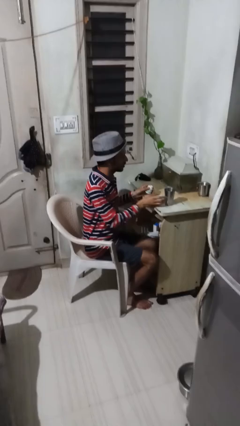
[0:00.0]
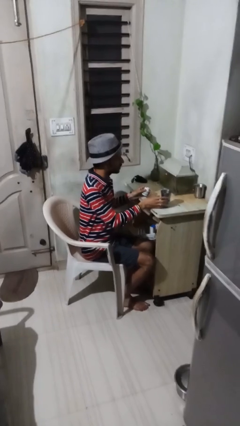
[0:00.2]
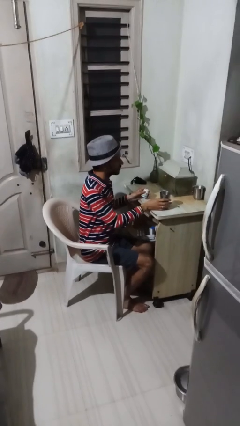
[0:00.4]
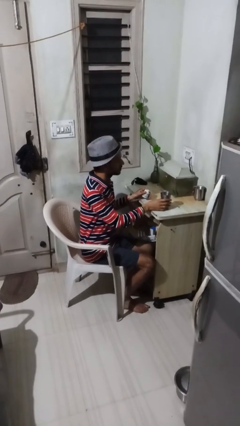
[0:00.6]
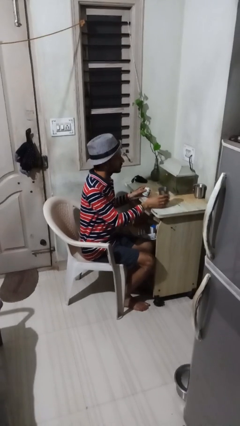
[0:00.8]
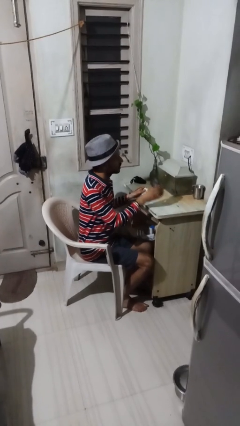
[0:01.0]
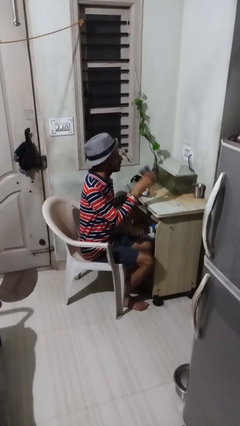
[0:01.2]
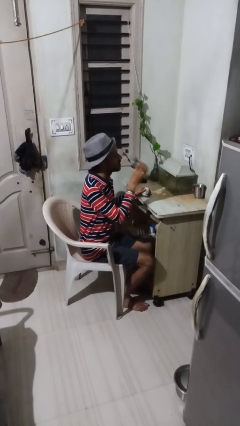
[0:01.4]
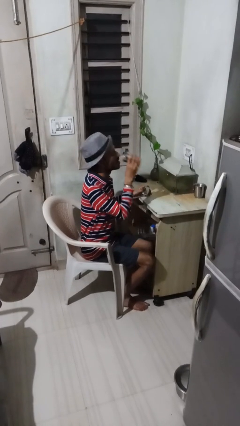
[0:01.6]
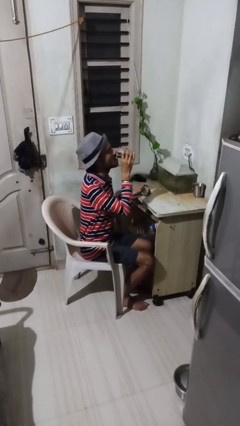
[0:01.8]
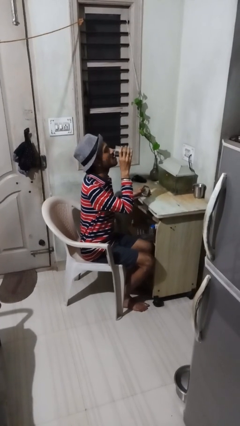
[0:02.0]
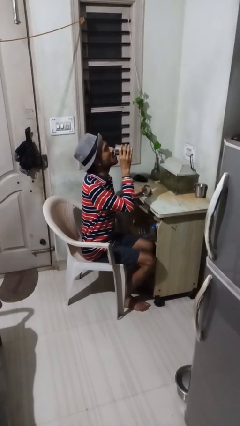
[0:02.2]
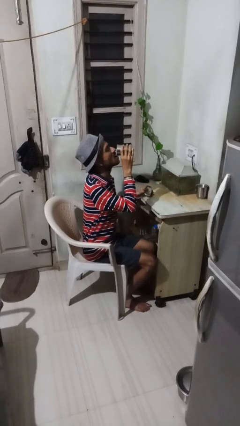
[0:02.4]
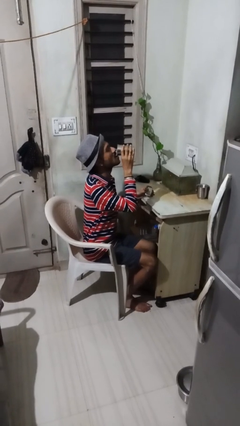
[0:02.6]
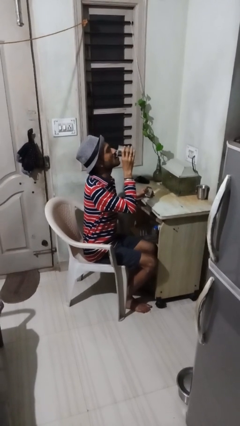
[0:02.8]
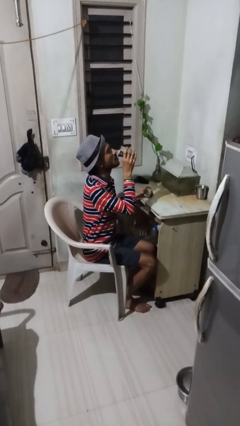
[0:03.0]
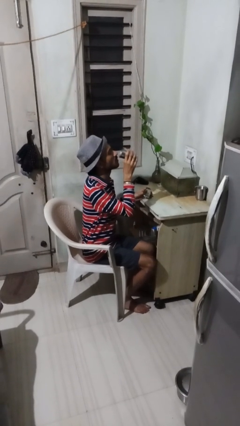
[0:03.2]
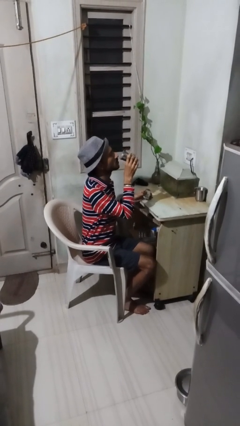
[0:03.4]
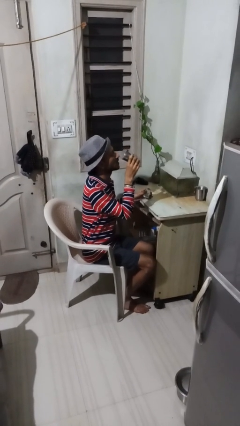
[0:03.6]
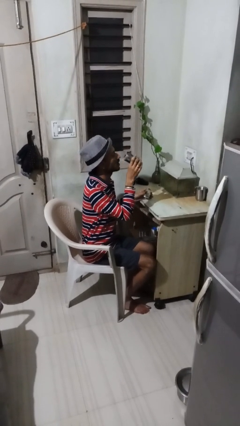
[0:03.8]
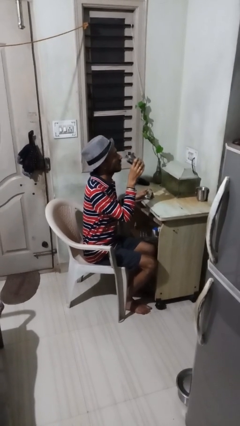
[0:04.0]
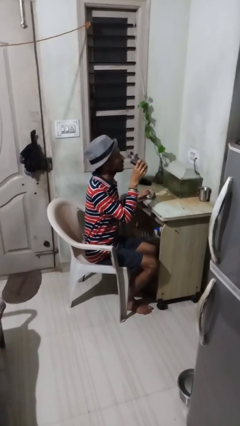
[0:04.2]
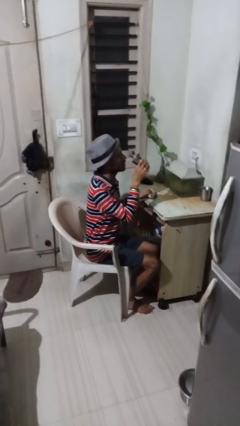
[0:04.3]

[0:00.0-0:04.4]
person drinks from cup

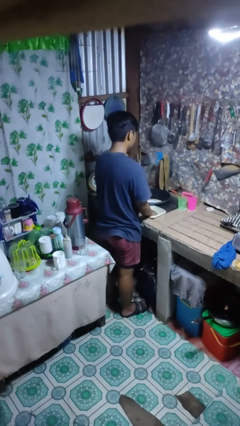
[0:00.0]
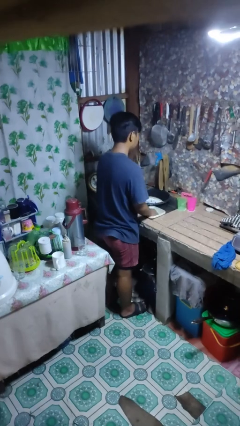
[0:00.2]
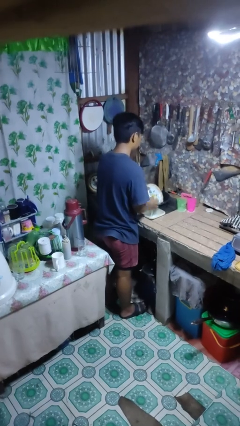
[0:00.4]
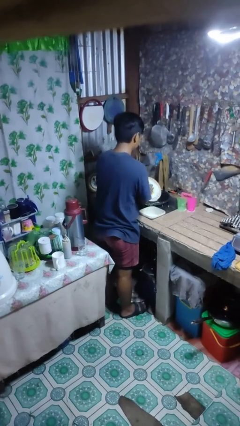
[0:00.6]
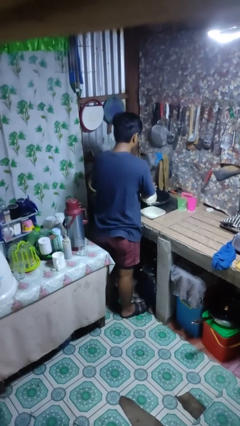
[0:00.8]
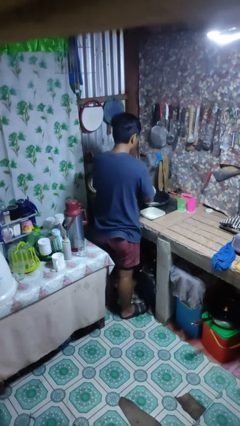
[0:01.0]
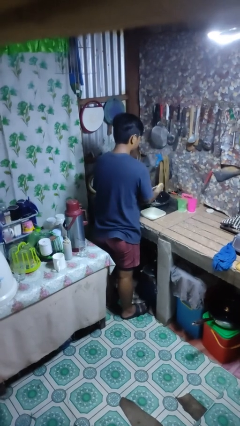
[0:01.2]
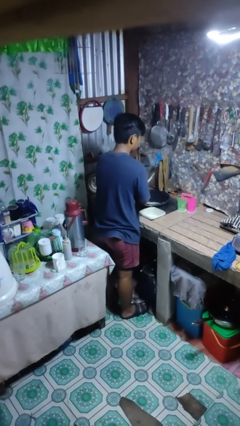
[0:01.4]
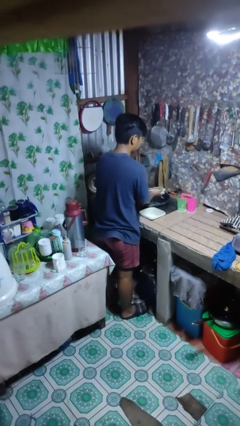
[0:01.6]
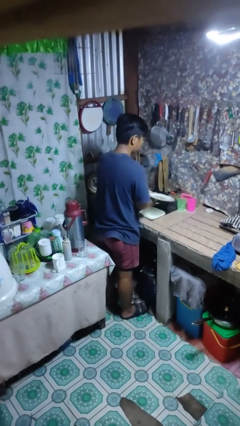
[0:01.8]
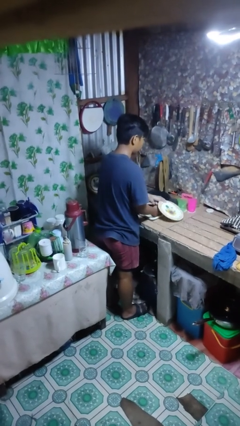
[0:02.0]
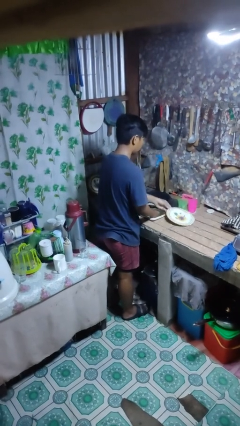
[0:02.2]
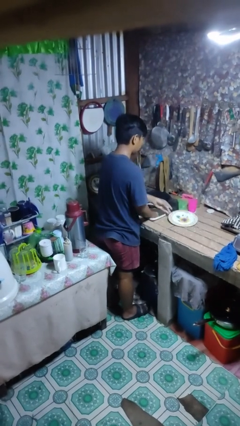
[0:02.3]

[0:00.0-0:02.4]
person washes dish

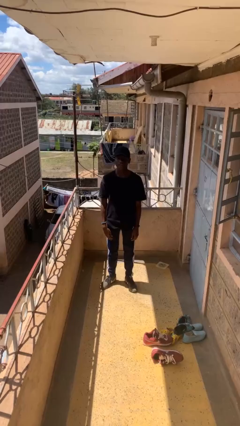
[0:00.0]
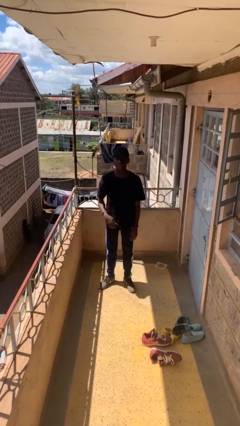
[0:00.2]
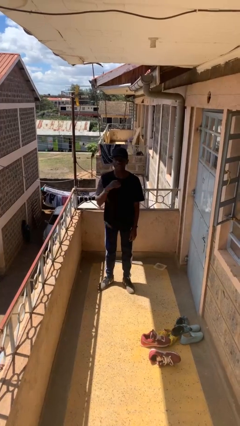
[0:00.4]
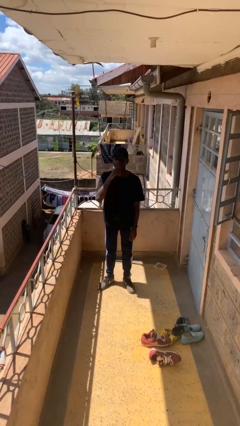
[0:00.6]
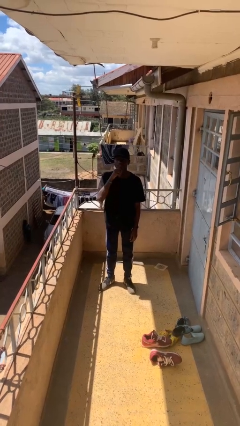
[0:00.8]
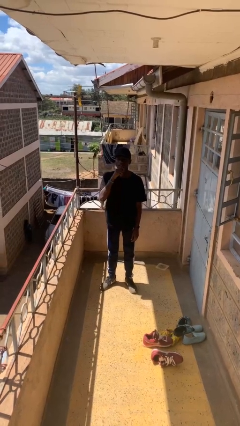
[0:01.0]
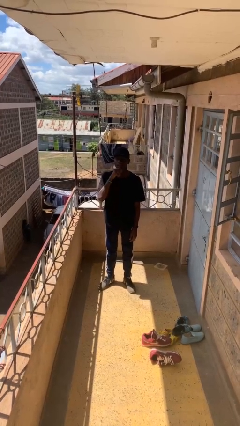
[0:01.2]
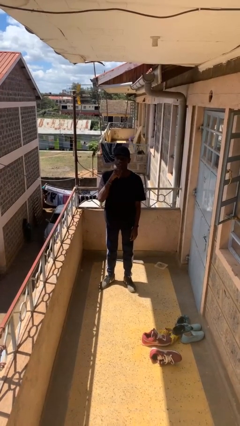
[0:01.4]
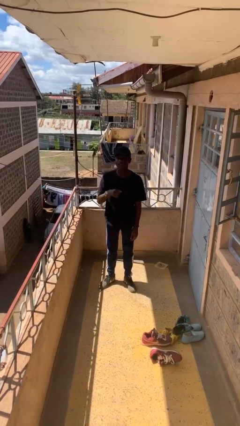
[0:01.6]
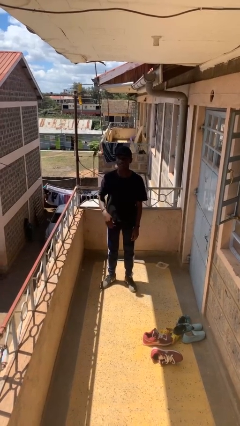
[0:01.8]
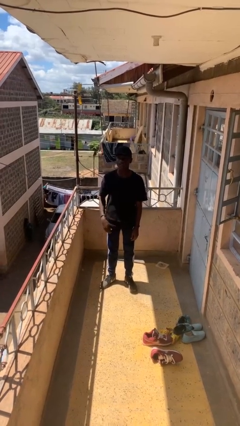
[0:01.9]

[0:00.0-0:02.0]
person strokes chin

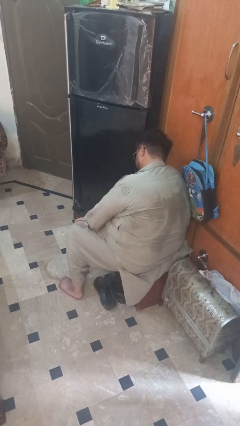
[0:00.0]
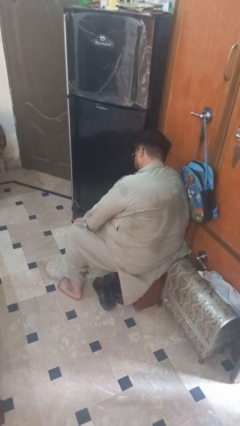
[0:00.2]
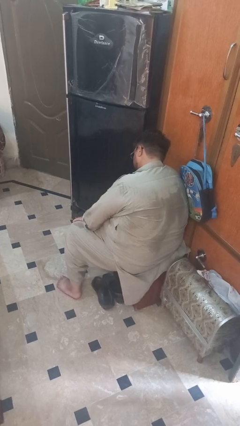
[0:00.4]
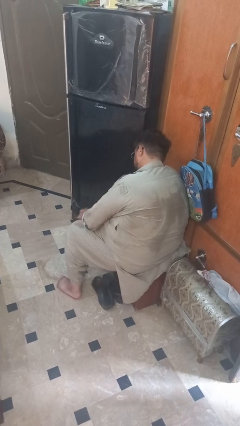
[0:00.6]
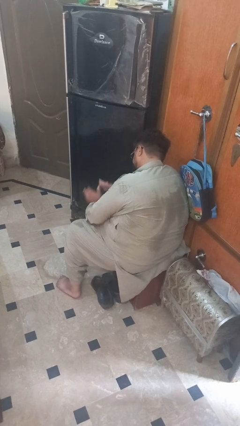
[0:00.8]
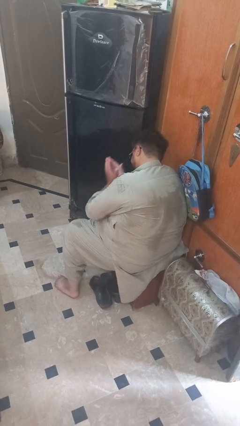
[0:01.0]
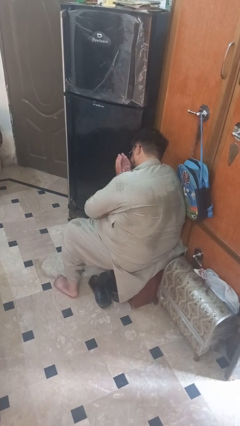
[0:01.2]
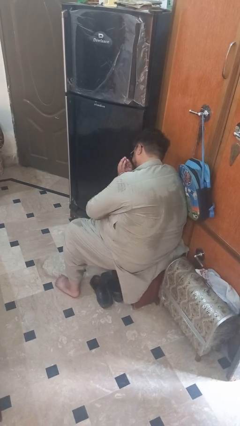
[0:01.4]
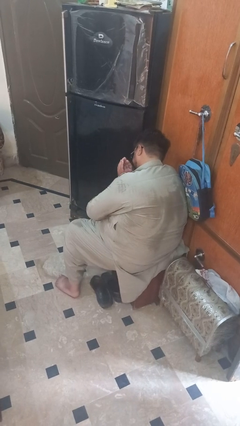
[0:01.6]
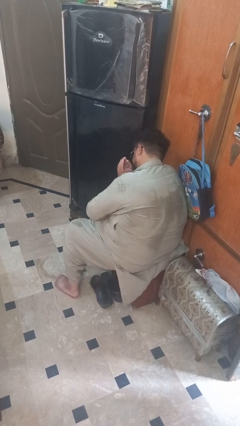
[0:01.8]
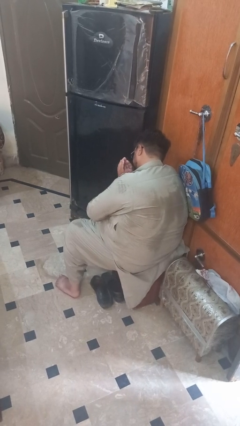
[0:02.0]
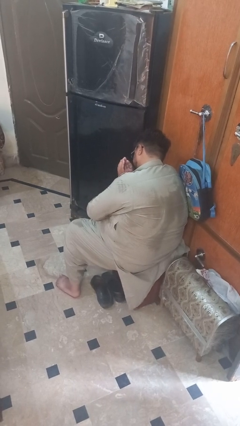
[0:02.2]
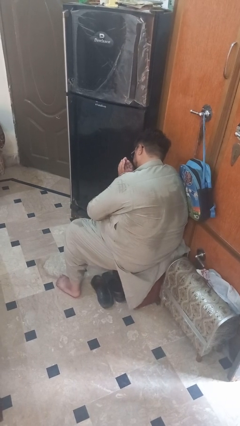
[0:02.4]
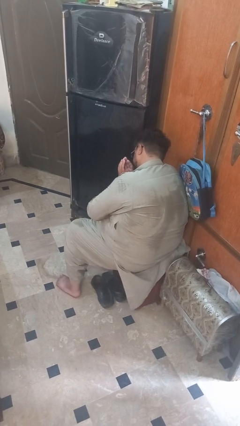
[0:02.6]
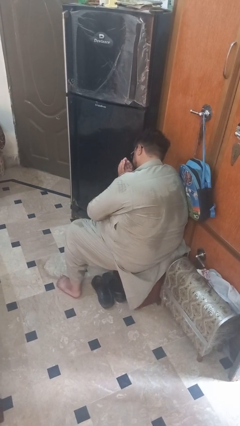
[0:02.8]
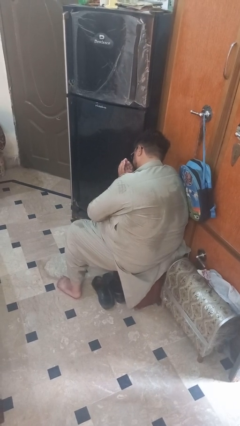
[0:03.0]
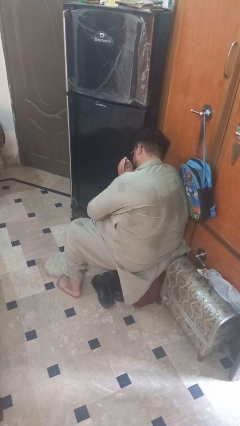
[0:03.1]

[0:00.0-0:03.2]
person prays

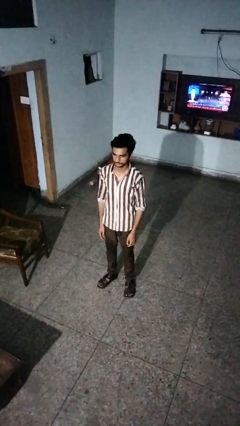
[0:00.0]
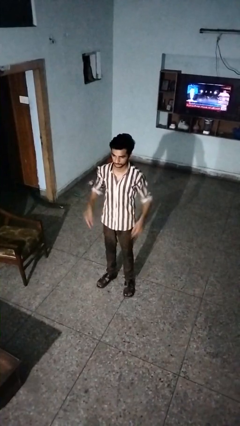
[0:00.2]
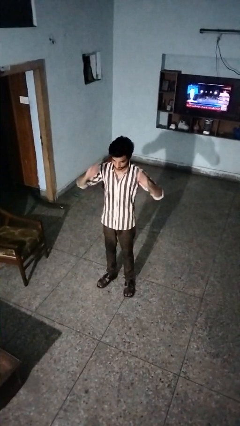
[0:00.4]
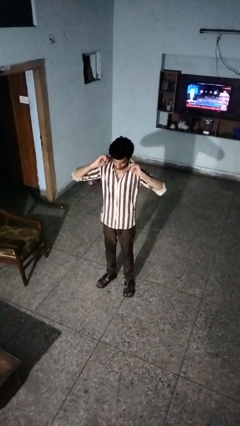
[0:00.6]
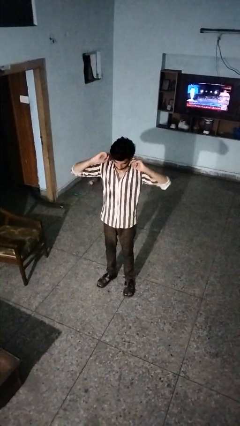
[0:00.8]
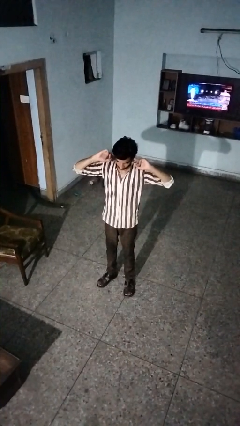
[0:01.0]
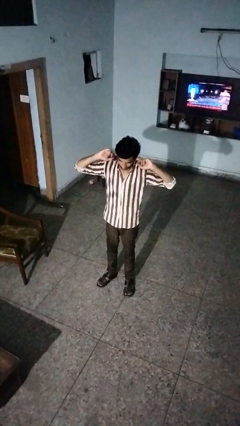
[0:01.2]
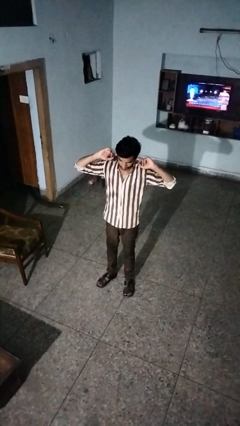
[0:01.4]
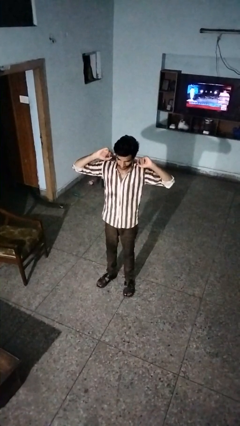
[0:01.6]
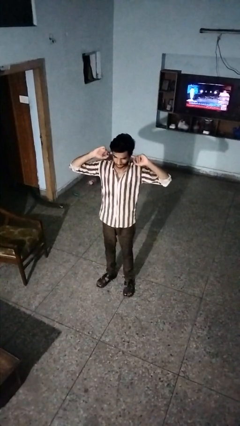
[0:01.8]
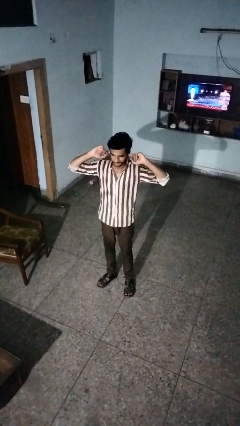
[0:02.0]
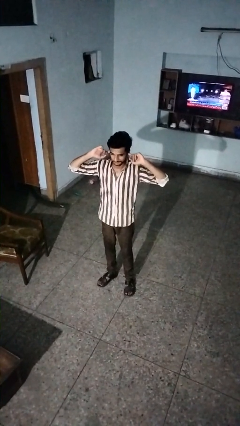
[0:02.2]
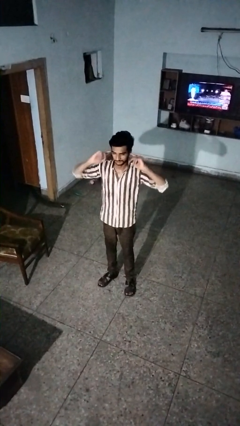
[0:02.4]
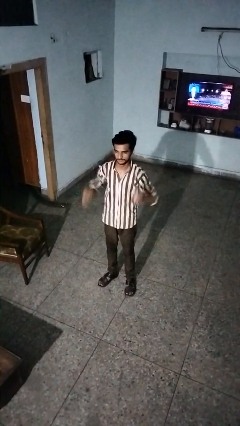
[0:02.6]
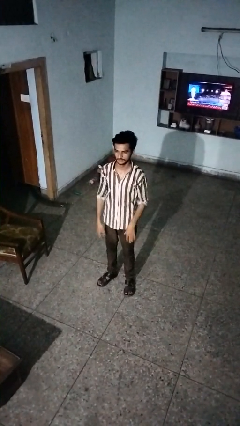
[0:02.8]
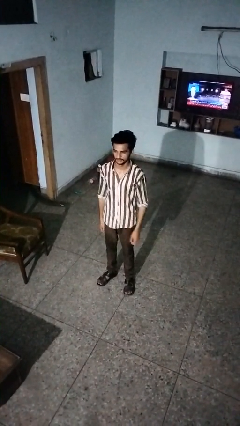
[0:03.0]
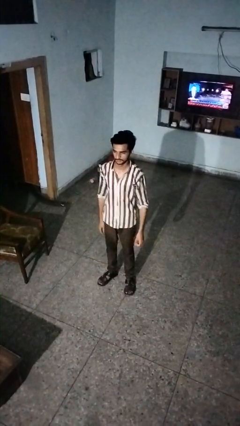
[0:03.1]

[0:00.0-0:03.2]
person puts fingers in ear

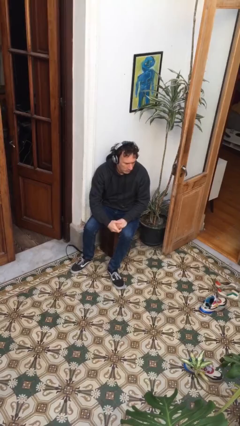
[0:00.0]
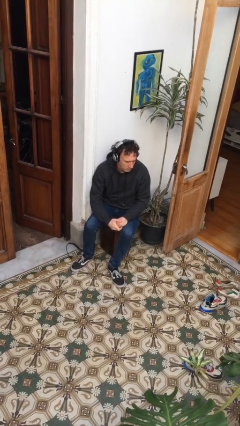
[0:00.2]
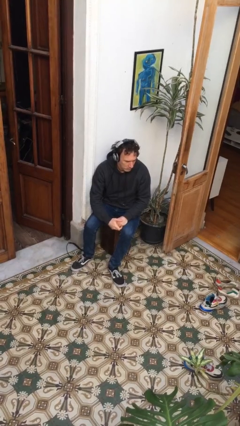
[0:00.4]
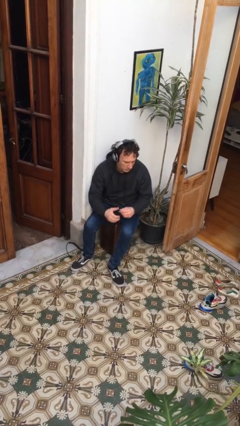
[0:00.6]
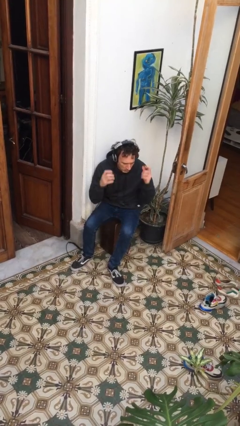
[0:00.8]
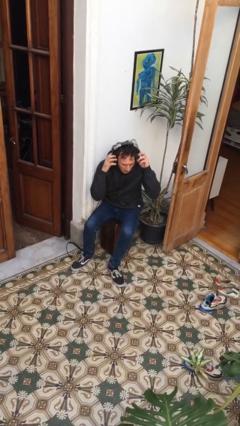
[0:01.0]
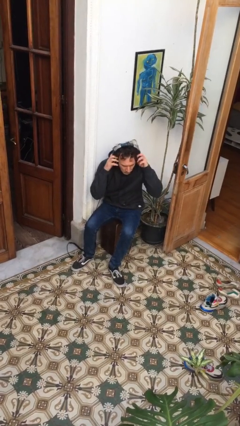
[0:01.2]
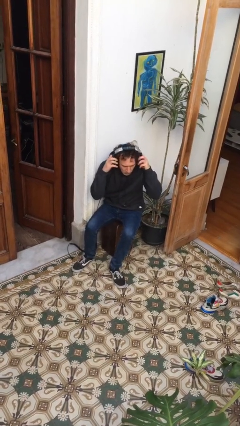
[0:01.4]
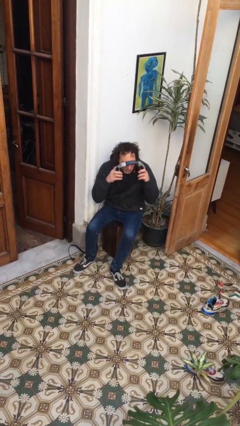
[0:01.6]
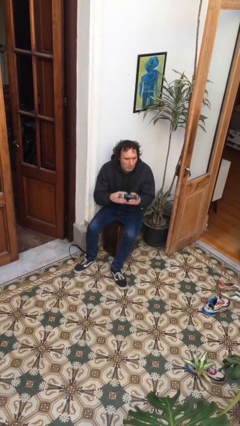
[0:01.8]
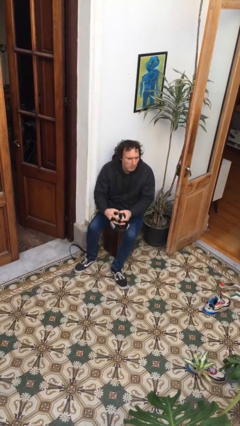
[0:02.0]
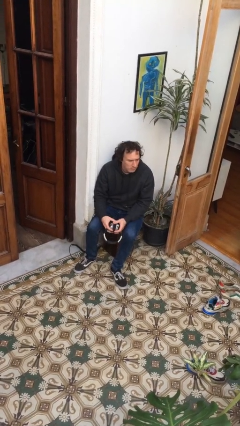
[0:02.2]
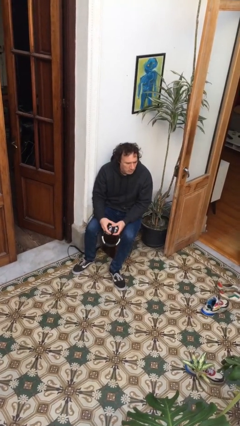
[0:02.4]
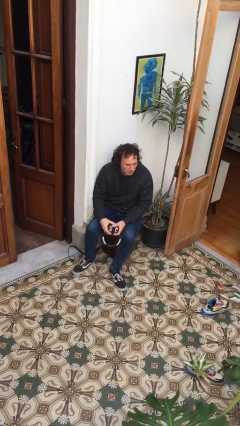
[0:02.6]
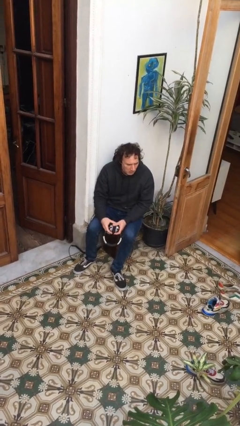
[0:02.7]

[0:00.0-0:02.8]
person takes off headphones
